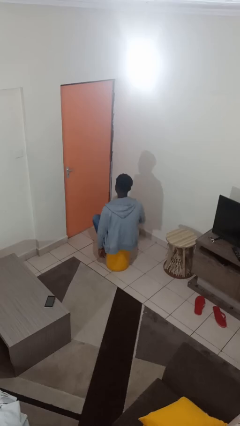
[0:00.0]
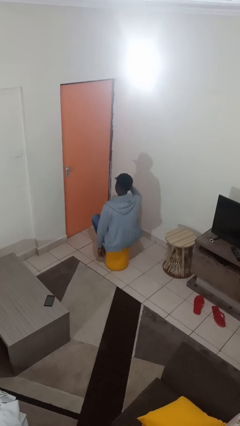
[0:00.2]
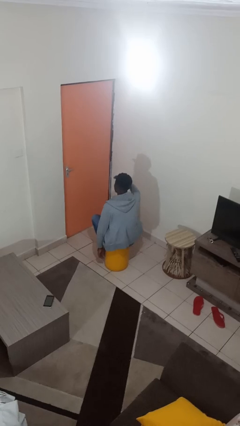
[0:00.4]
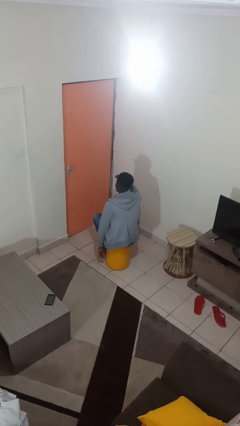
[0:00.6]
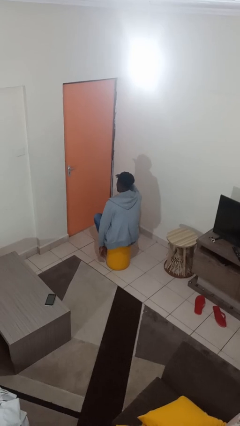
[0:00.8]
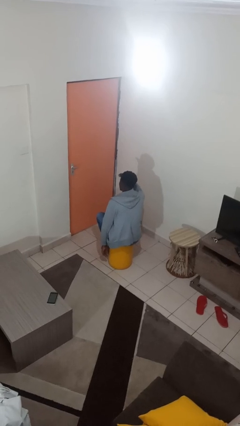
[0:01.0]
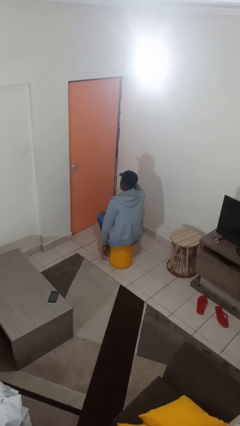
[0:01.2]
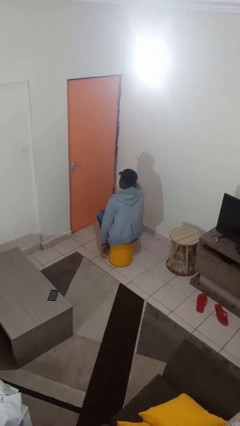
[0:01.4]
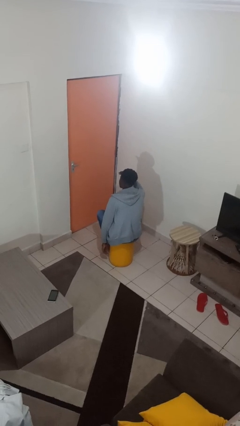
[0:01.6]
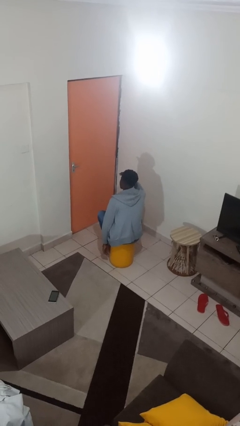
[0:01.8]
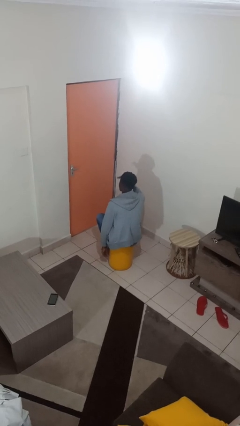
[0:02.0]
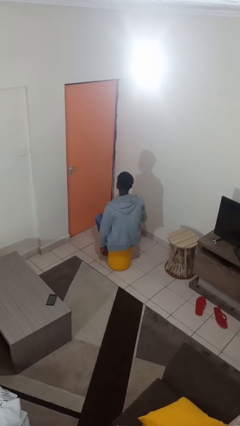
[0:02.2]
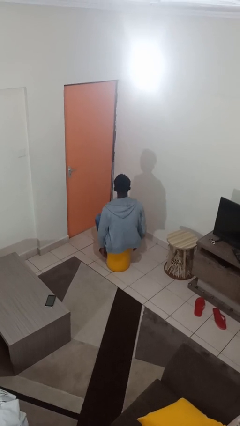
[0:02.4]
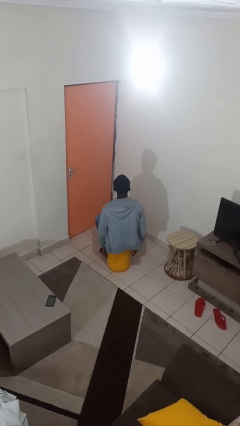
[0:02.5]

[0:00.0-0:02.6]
person shades eyes

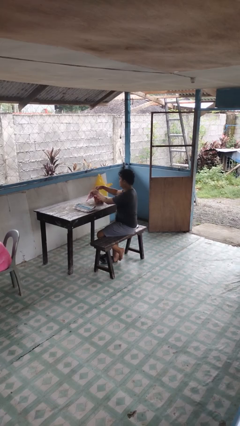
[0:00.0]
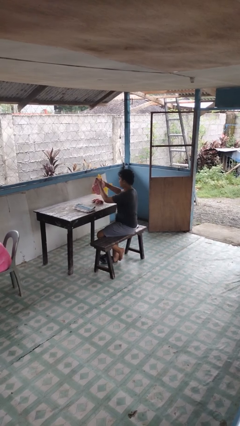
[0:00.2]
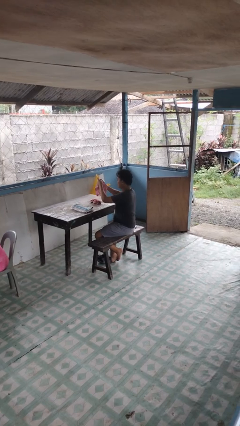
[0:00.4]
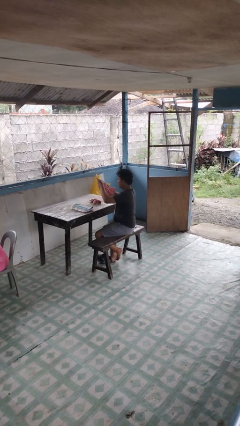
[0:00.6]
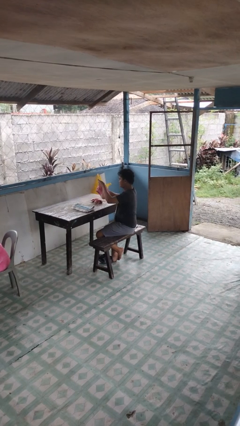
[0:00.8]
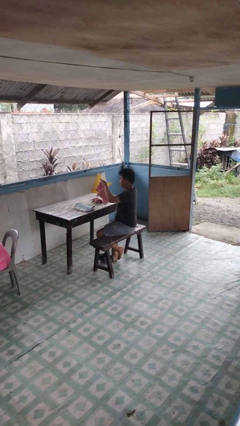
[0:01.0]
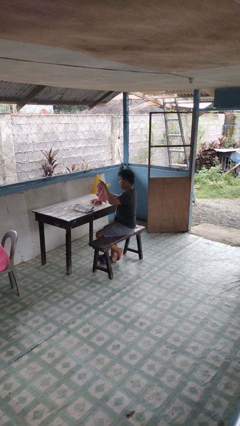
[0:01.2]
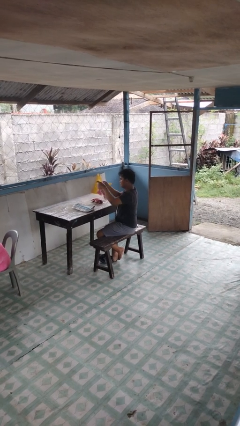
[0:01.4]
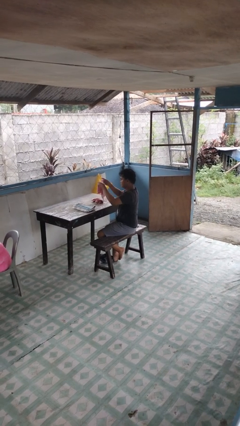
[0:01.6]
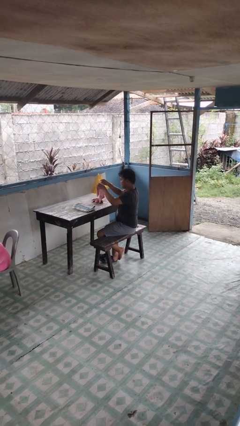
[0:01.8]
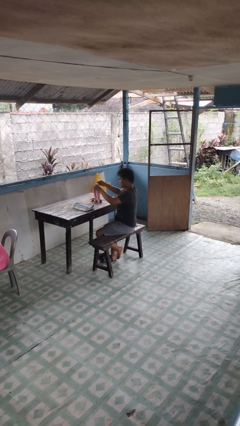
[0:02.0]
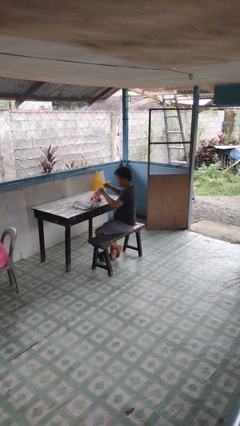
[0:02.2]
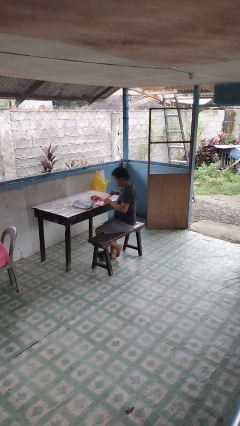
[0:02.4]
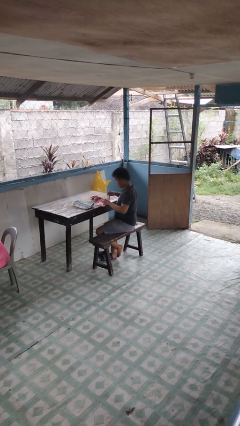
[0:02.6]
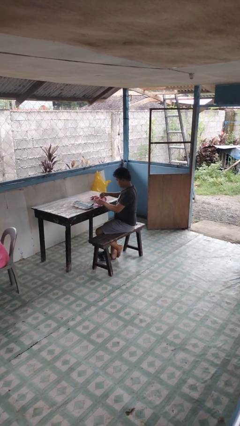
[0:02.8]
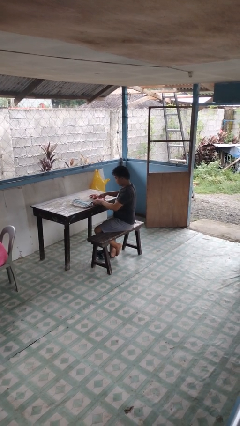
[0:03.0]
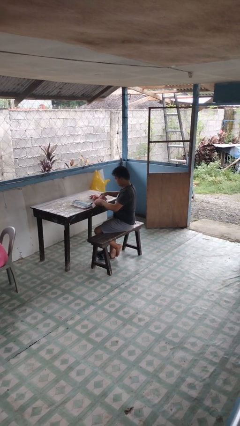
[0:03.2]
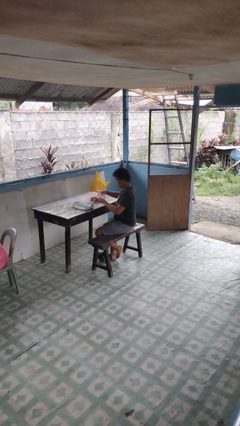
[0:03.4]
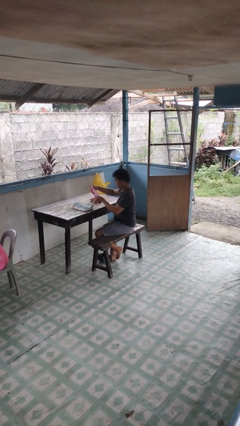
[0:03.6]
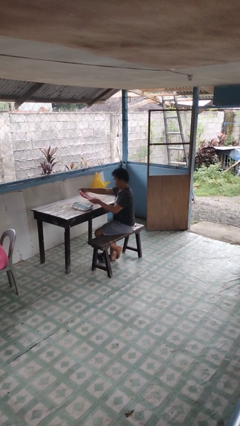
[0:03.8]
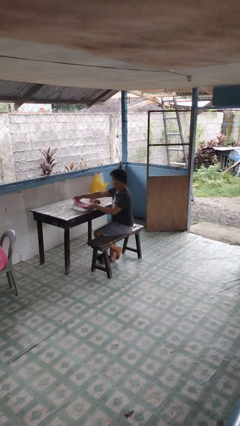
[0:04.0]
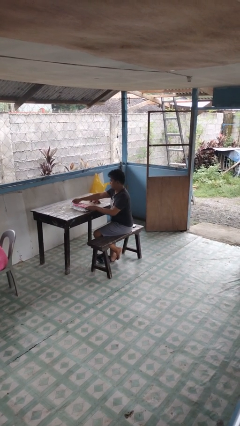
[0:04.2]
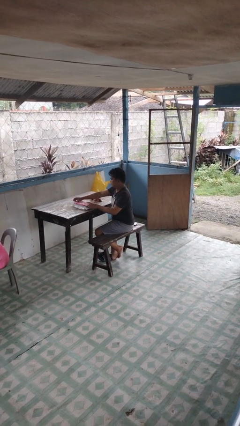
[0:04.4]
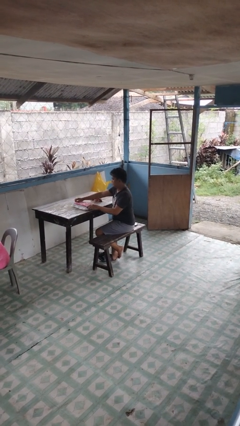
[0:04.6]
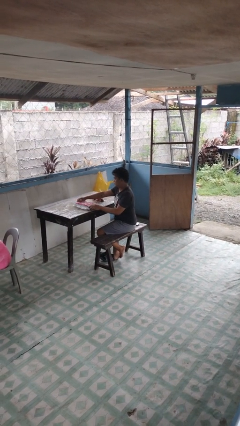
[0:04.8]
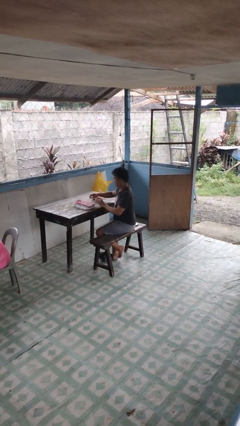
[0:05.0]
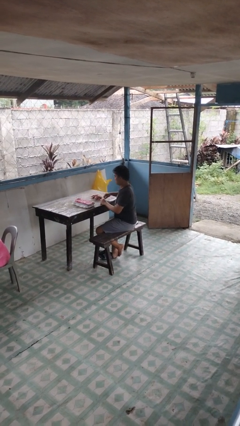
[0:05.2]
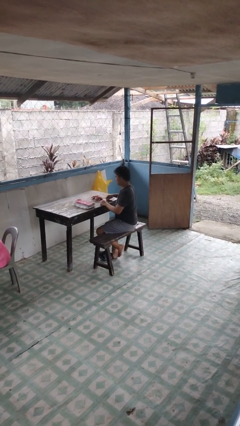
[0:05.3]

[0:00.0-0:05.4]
person folds towel

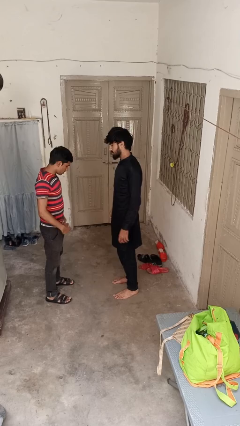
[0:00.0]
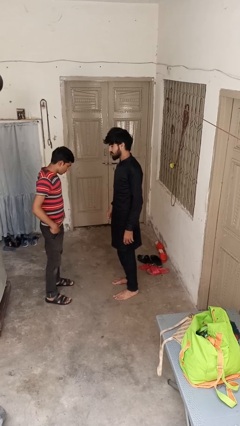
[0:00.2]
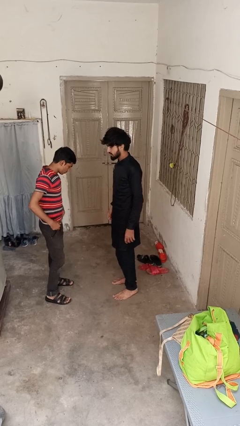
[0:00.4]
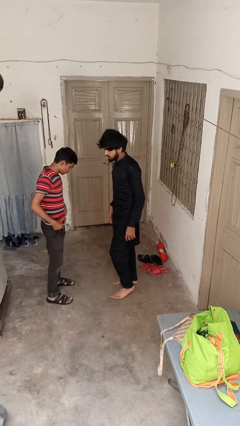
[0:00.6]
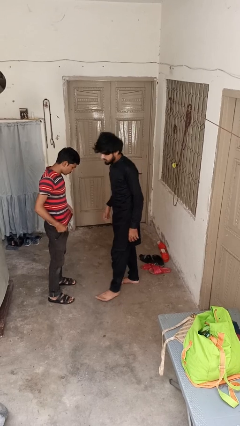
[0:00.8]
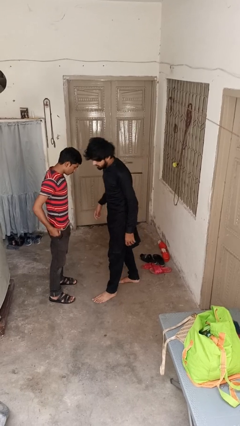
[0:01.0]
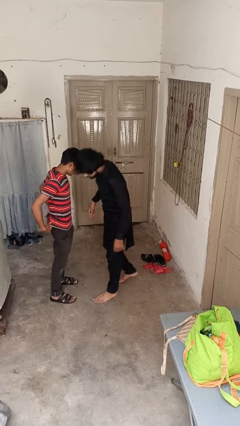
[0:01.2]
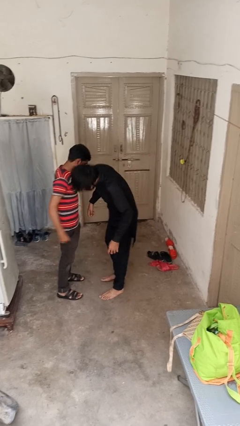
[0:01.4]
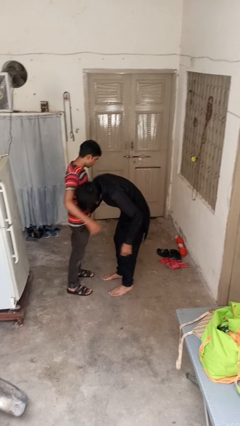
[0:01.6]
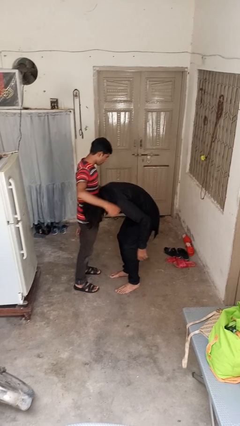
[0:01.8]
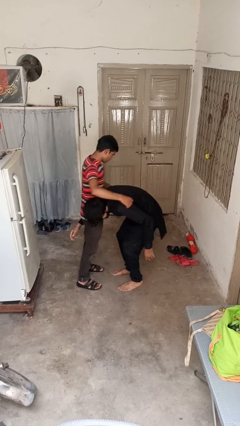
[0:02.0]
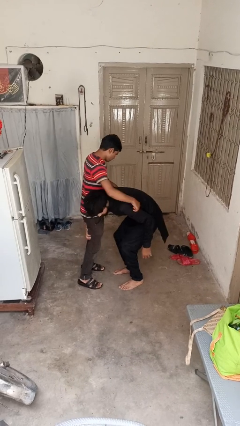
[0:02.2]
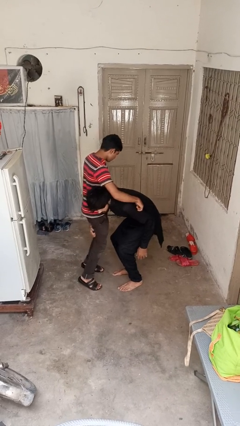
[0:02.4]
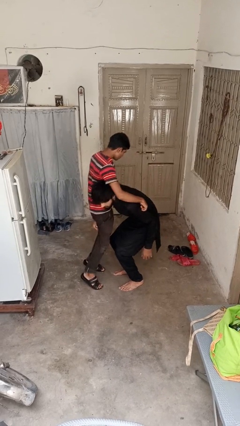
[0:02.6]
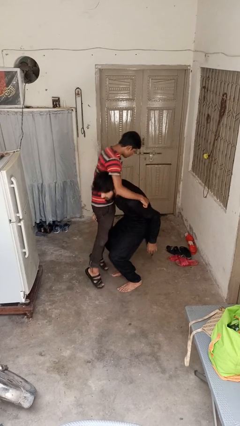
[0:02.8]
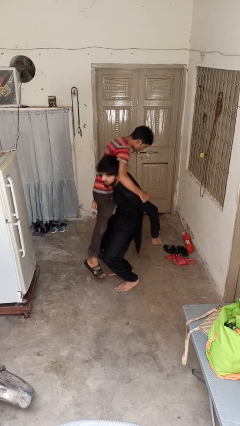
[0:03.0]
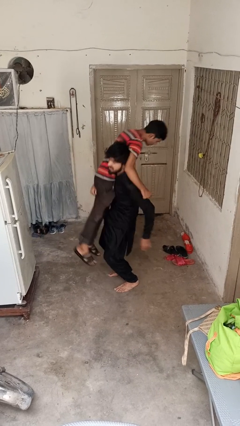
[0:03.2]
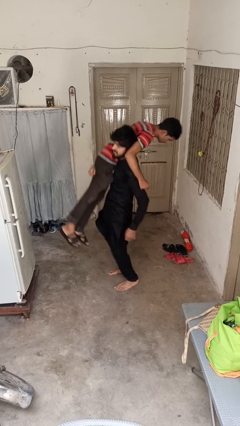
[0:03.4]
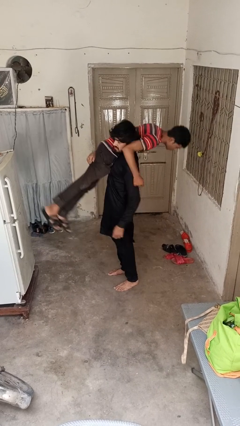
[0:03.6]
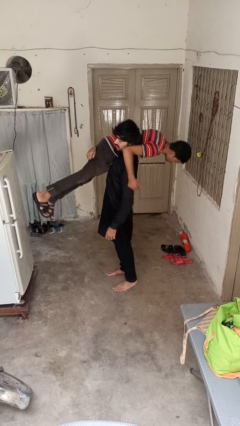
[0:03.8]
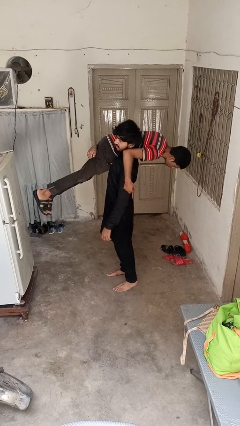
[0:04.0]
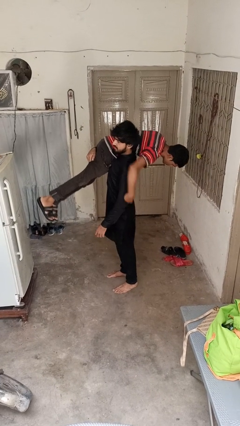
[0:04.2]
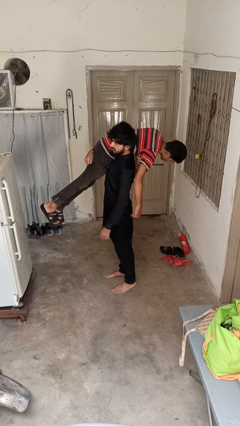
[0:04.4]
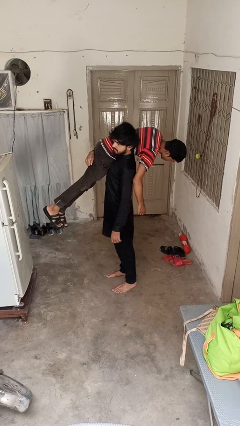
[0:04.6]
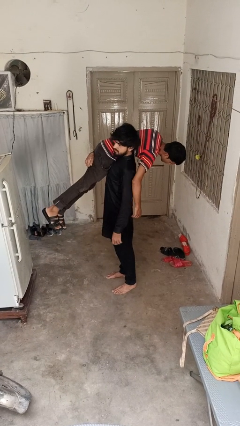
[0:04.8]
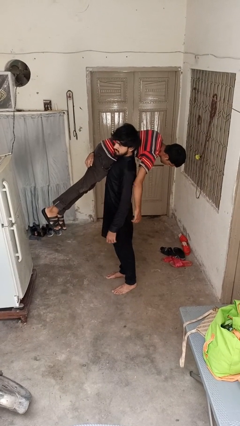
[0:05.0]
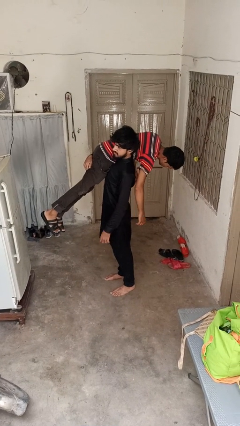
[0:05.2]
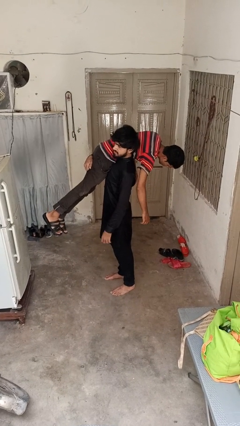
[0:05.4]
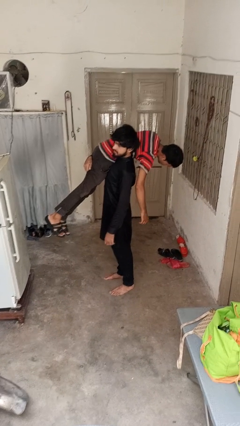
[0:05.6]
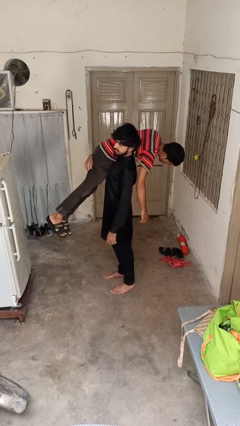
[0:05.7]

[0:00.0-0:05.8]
person carries person over shoulder

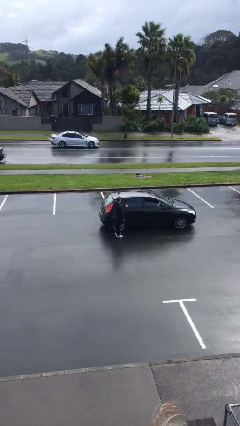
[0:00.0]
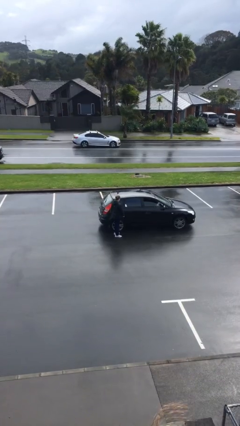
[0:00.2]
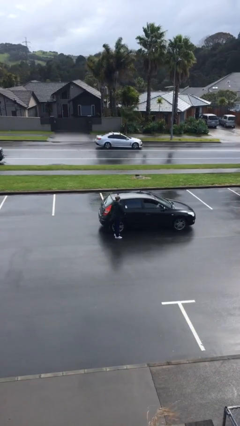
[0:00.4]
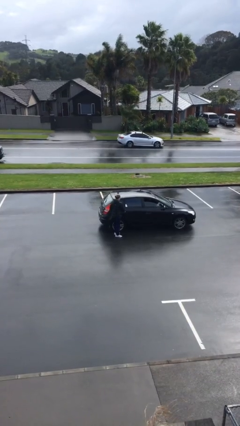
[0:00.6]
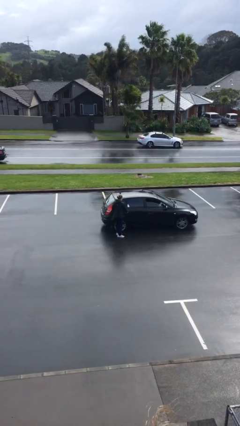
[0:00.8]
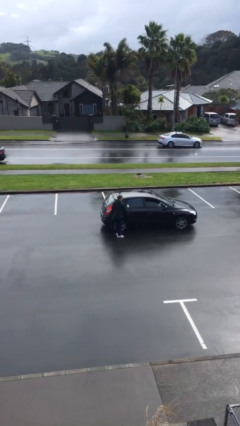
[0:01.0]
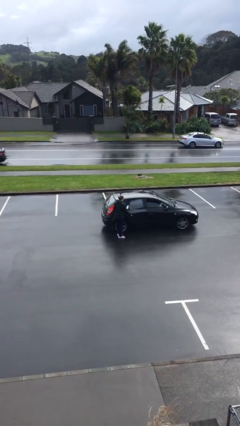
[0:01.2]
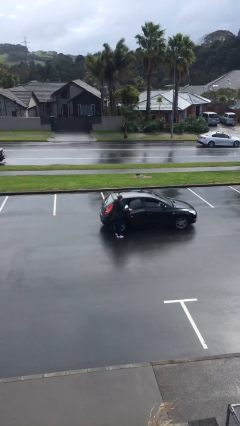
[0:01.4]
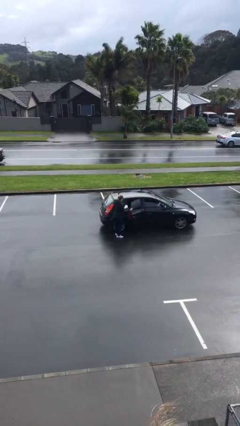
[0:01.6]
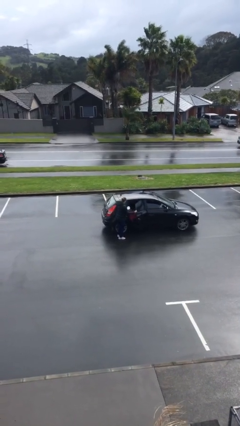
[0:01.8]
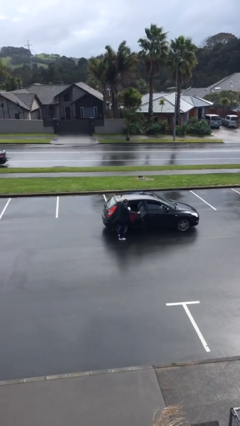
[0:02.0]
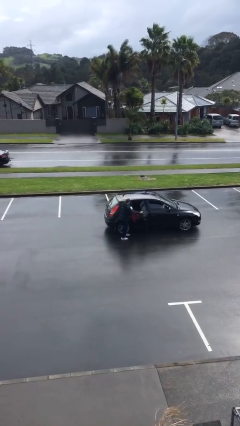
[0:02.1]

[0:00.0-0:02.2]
person opens car door

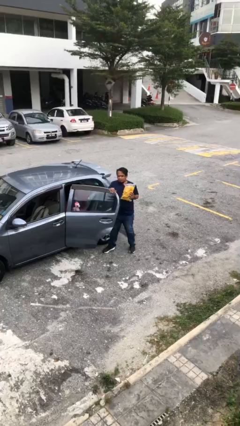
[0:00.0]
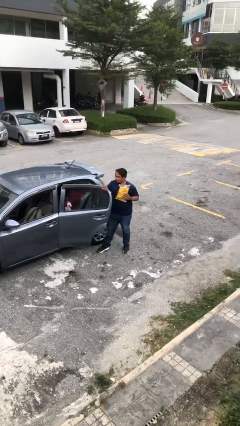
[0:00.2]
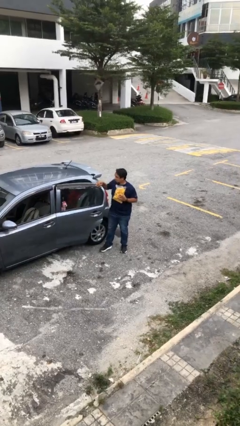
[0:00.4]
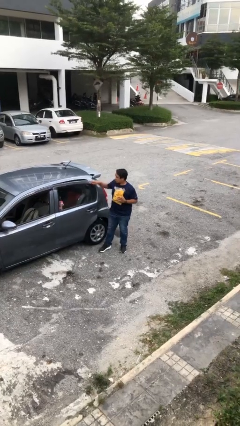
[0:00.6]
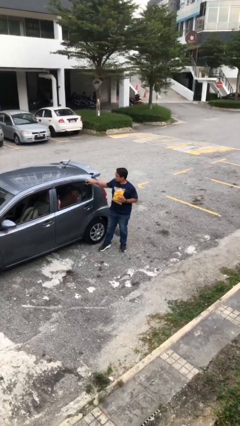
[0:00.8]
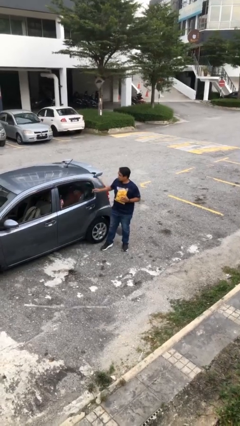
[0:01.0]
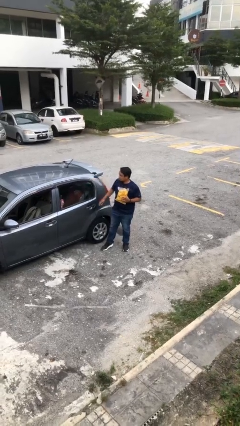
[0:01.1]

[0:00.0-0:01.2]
person closes car door
